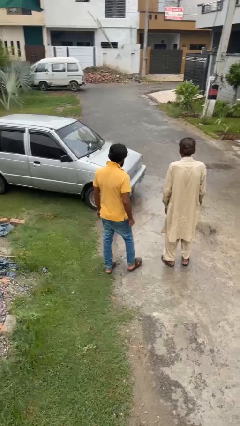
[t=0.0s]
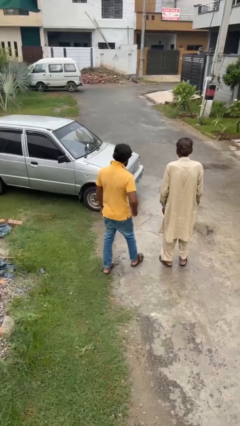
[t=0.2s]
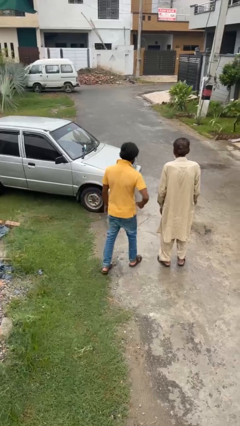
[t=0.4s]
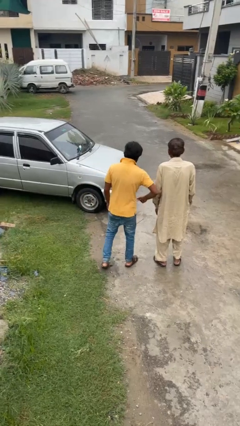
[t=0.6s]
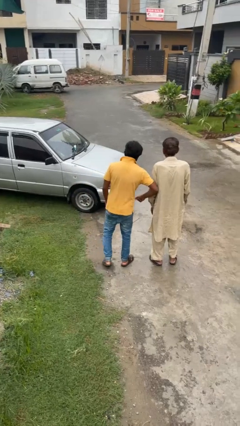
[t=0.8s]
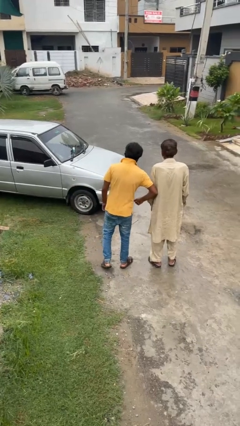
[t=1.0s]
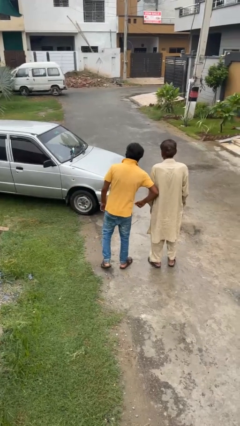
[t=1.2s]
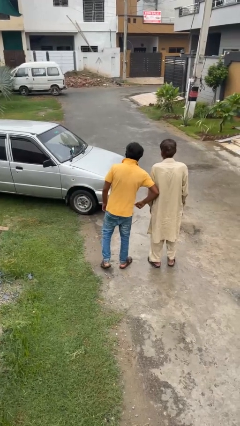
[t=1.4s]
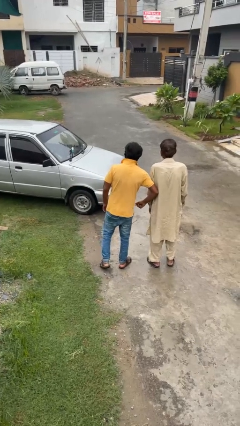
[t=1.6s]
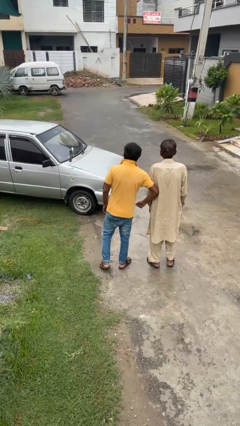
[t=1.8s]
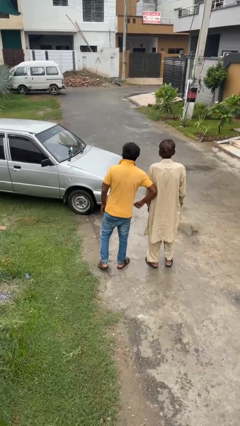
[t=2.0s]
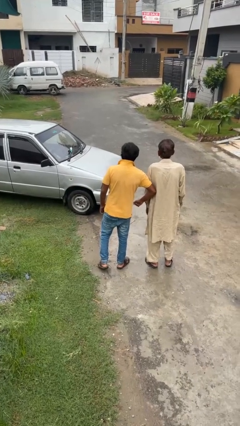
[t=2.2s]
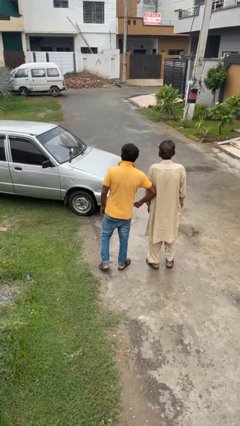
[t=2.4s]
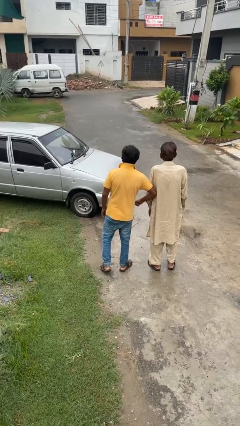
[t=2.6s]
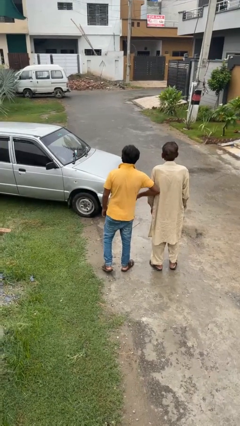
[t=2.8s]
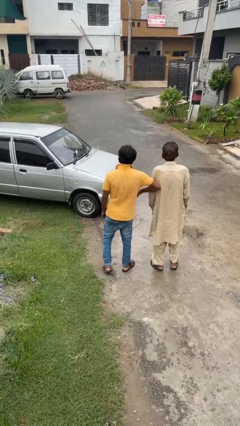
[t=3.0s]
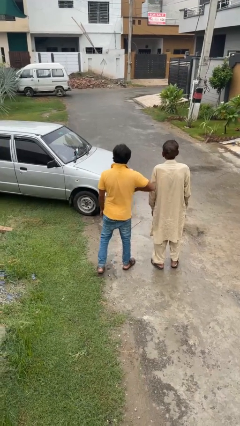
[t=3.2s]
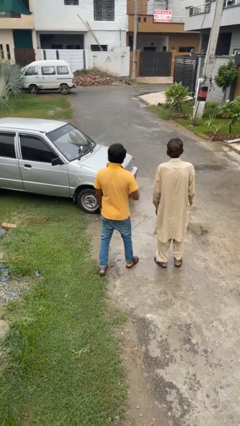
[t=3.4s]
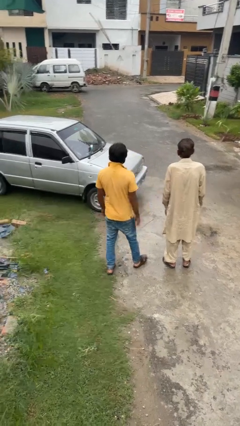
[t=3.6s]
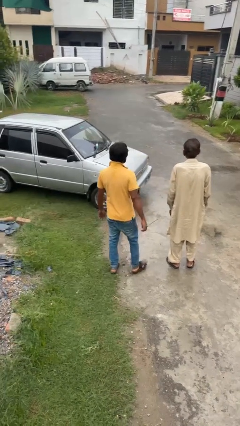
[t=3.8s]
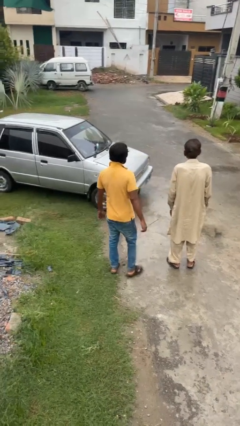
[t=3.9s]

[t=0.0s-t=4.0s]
person nudges person with elbow

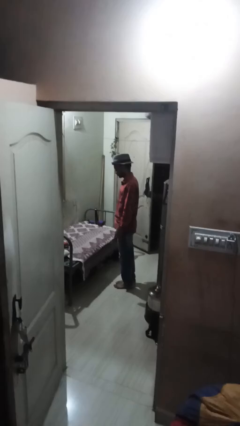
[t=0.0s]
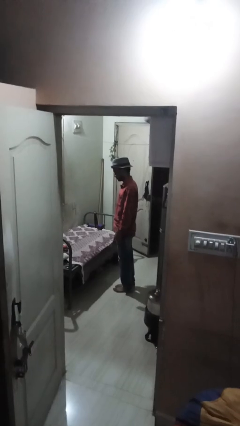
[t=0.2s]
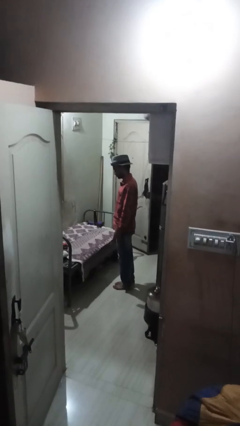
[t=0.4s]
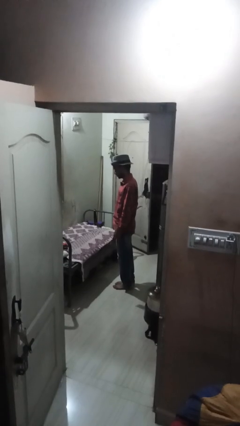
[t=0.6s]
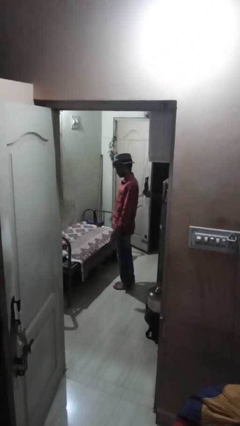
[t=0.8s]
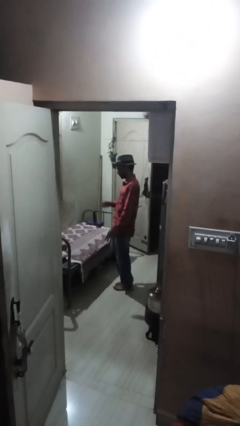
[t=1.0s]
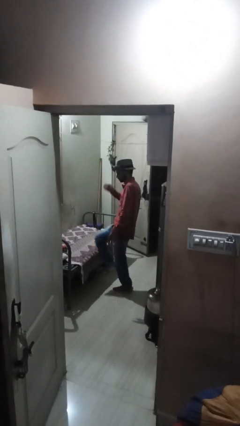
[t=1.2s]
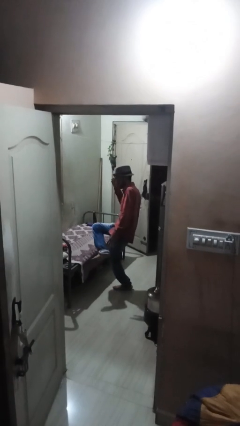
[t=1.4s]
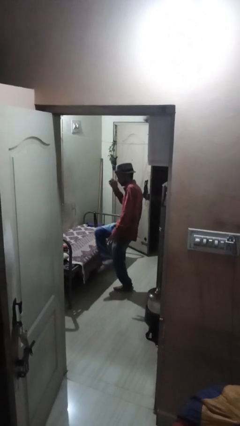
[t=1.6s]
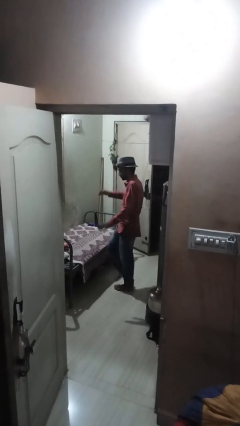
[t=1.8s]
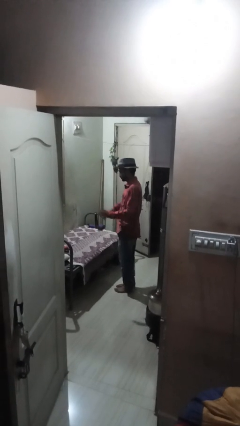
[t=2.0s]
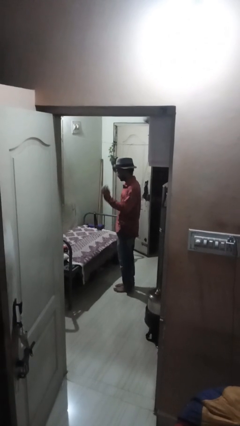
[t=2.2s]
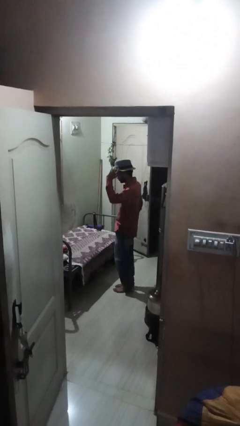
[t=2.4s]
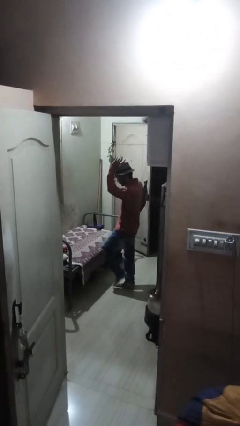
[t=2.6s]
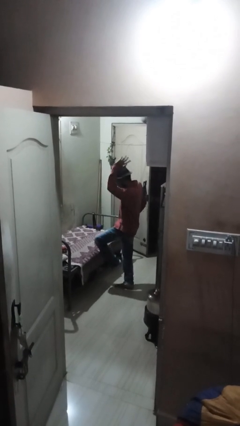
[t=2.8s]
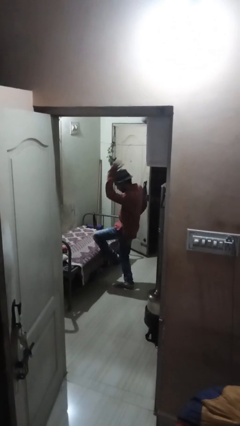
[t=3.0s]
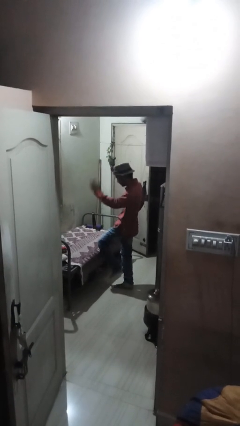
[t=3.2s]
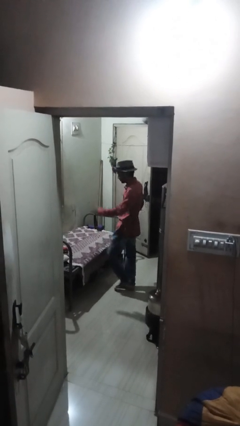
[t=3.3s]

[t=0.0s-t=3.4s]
person dances in place

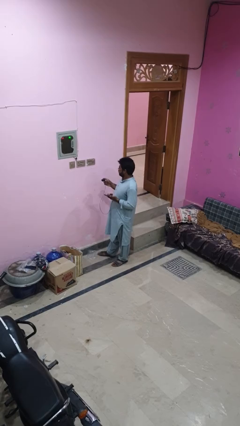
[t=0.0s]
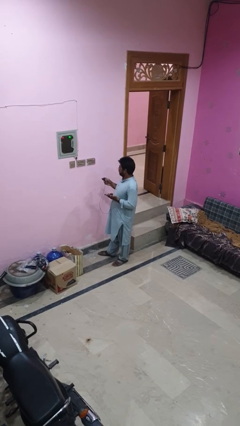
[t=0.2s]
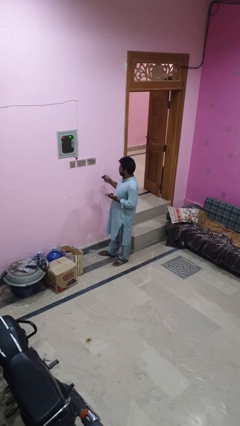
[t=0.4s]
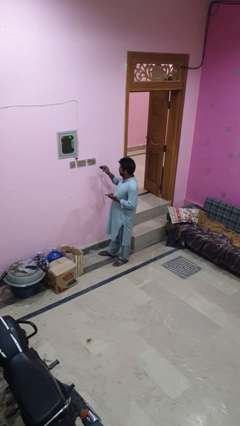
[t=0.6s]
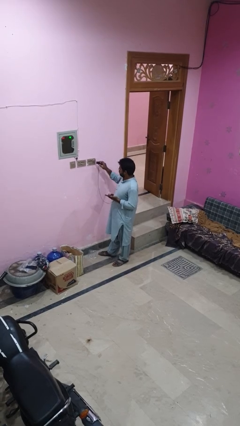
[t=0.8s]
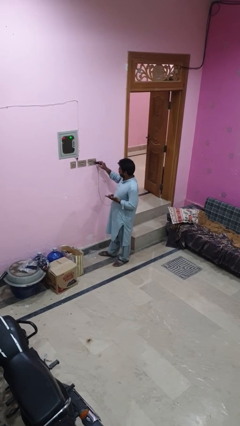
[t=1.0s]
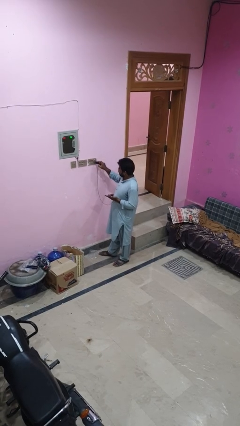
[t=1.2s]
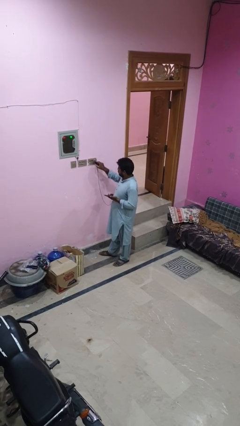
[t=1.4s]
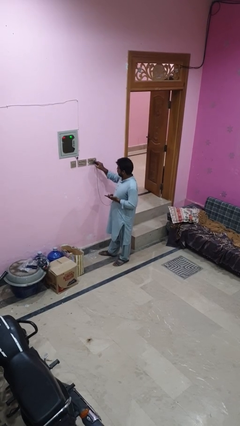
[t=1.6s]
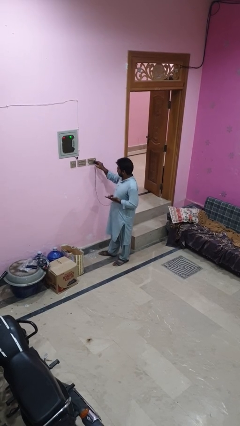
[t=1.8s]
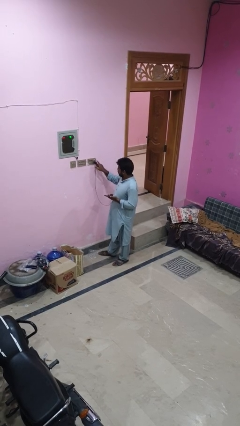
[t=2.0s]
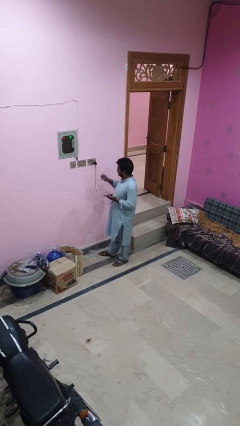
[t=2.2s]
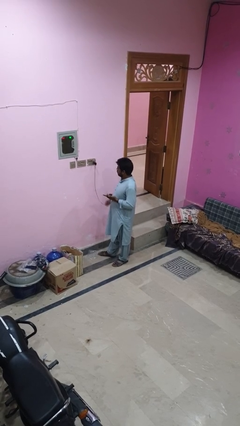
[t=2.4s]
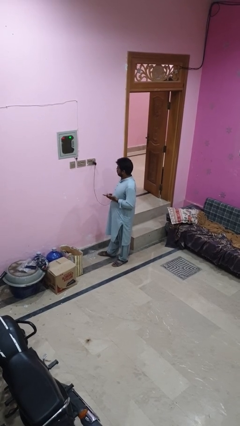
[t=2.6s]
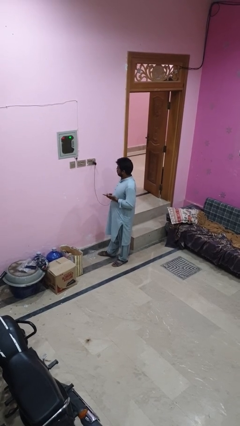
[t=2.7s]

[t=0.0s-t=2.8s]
person plugs into electrical socket

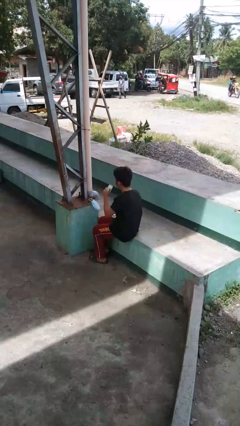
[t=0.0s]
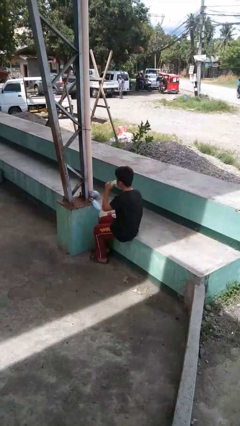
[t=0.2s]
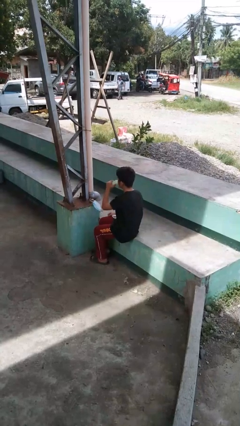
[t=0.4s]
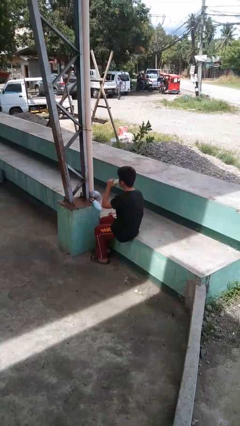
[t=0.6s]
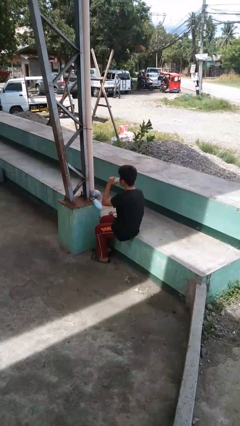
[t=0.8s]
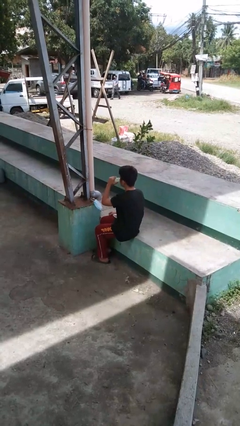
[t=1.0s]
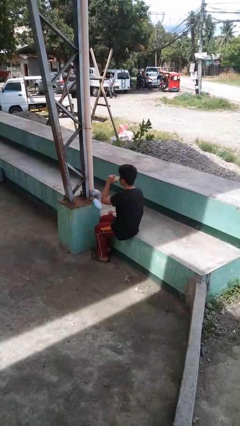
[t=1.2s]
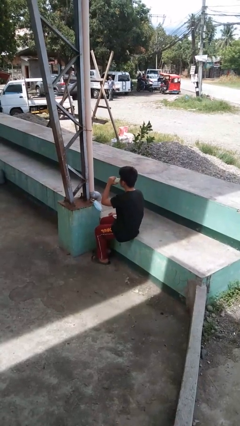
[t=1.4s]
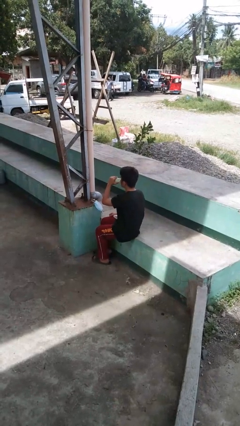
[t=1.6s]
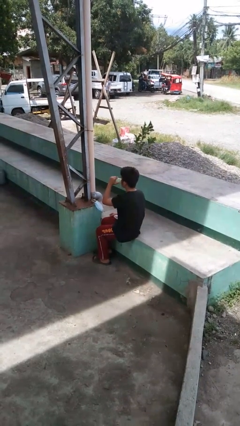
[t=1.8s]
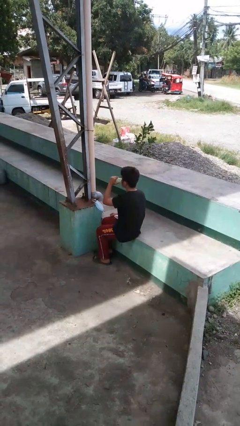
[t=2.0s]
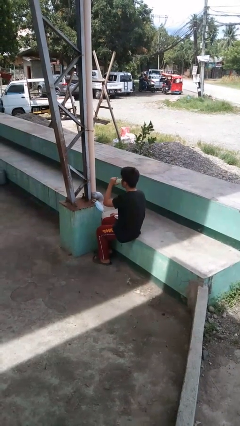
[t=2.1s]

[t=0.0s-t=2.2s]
person drinks from bottle

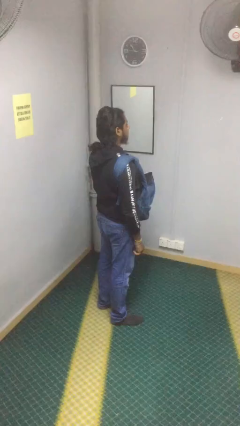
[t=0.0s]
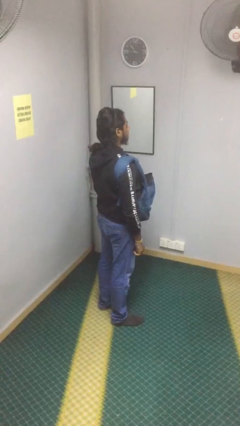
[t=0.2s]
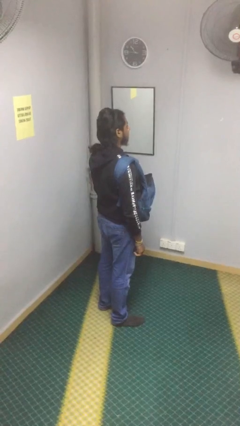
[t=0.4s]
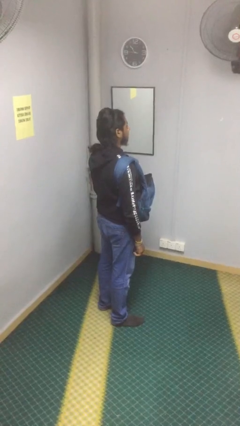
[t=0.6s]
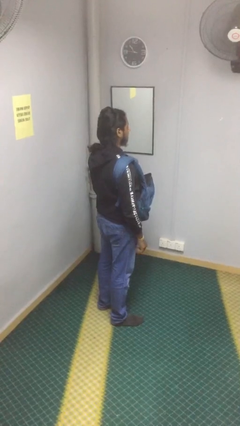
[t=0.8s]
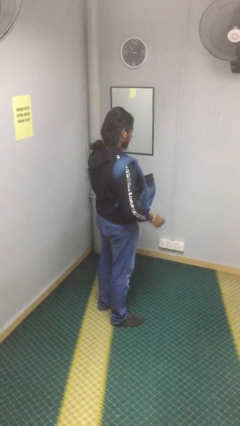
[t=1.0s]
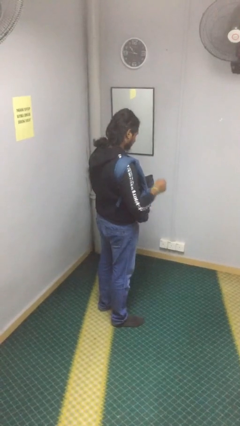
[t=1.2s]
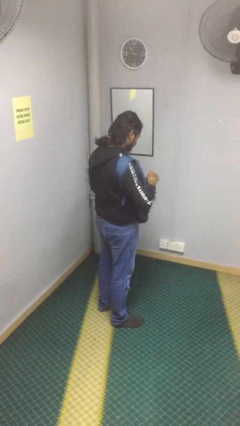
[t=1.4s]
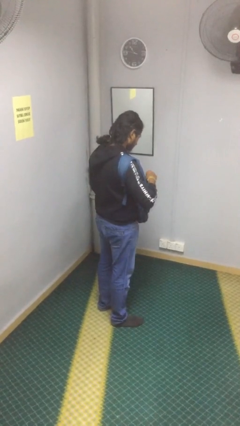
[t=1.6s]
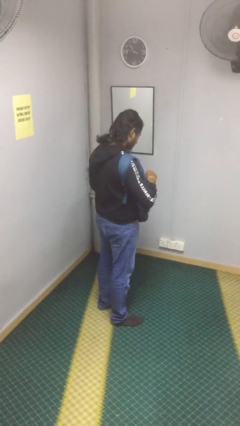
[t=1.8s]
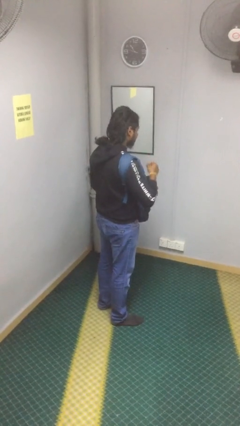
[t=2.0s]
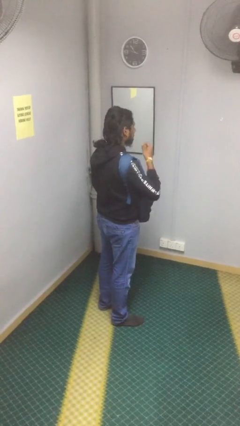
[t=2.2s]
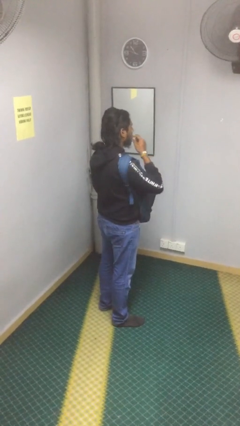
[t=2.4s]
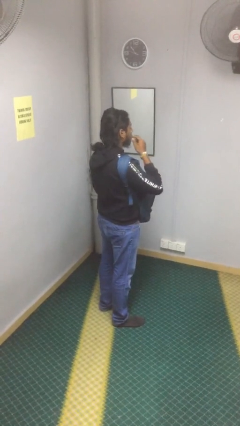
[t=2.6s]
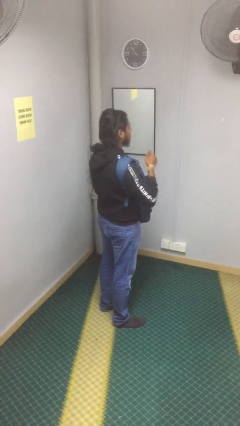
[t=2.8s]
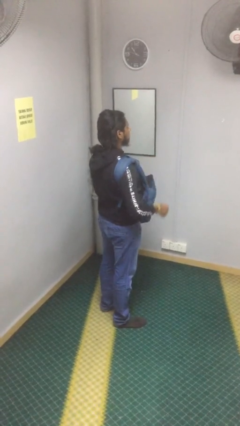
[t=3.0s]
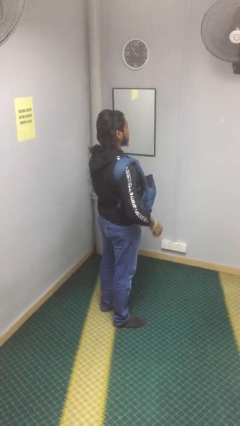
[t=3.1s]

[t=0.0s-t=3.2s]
person eats snack from bag

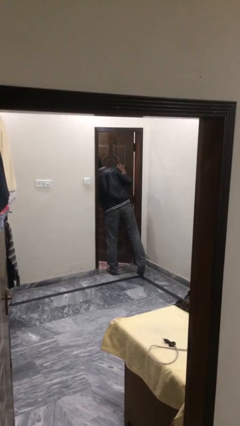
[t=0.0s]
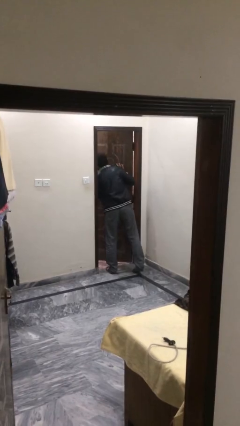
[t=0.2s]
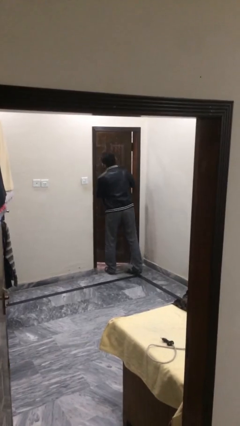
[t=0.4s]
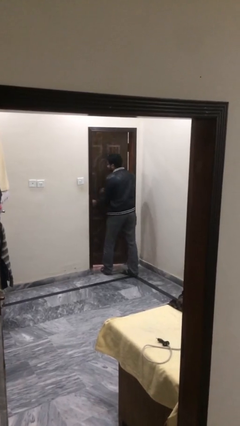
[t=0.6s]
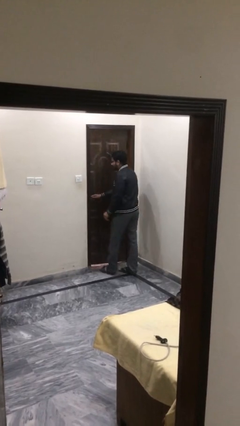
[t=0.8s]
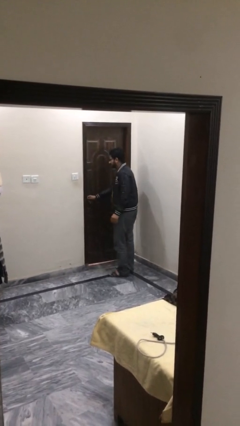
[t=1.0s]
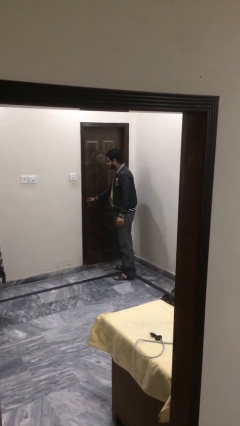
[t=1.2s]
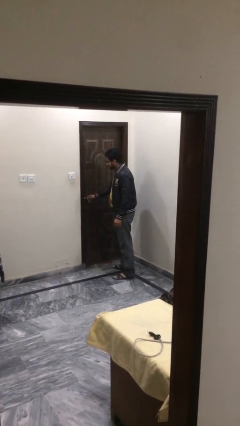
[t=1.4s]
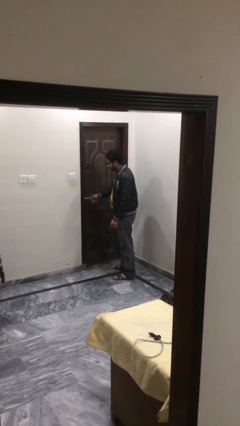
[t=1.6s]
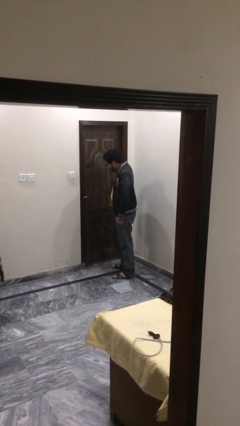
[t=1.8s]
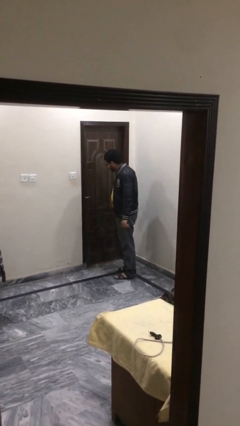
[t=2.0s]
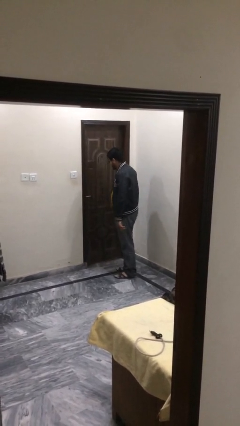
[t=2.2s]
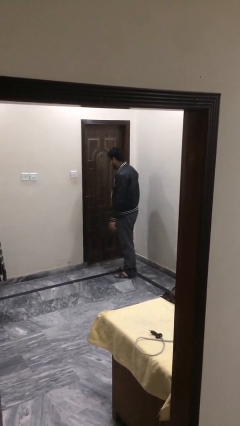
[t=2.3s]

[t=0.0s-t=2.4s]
person closes facility door
